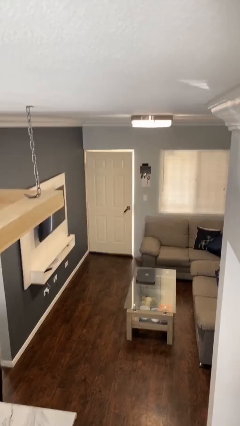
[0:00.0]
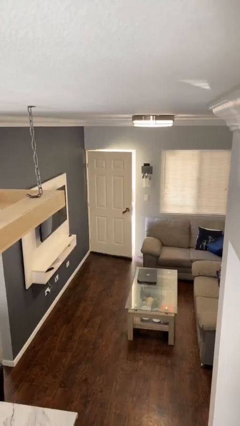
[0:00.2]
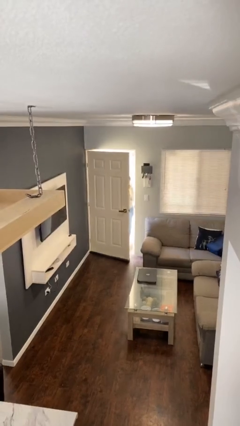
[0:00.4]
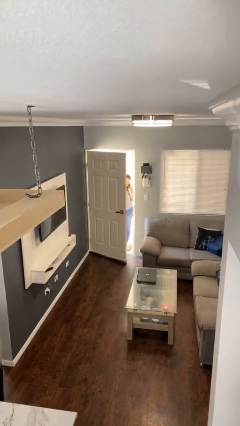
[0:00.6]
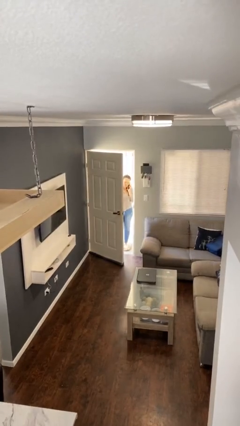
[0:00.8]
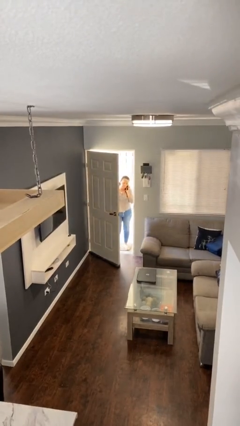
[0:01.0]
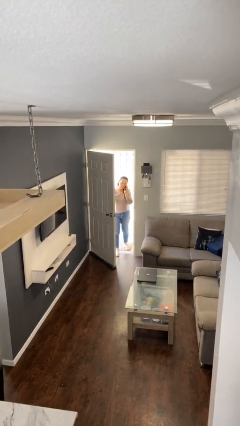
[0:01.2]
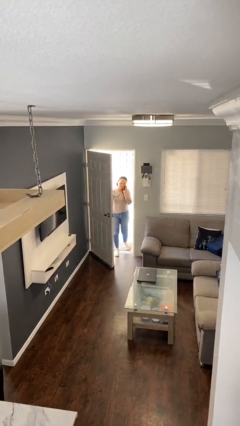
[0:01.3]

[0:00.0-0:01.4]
person opens facility door

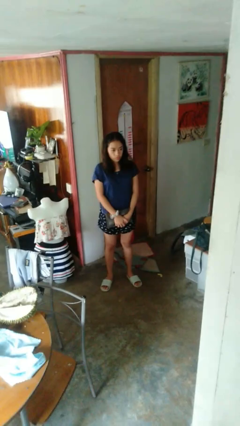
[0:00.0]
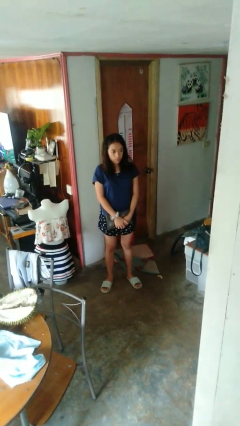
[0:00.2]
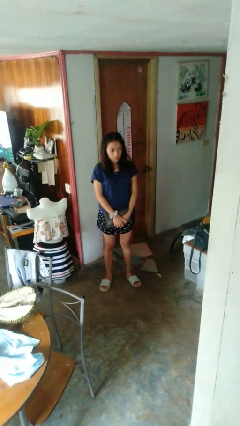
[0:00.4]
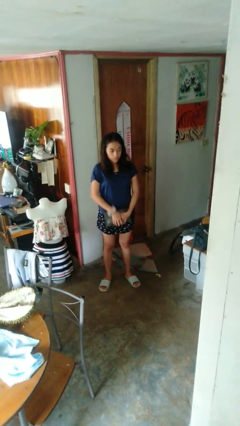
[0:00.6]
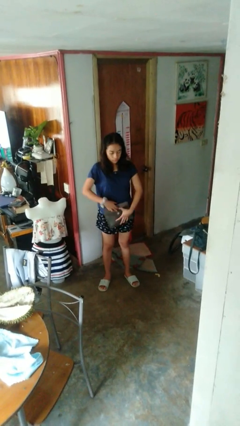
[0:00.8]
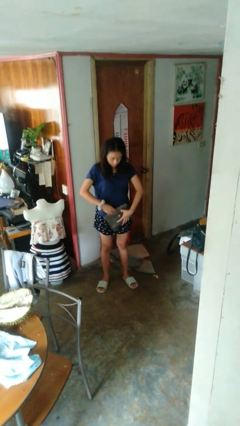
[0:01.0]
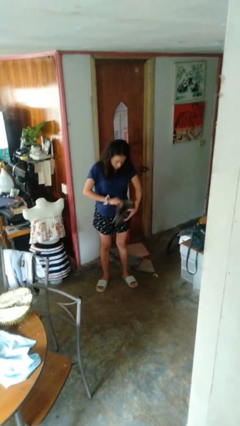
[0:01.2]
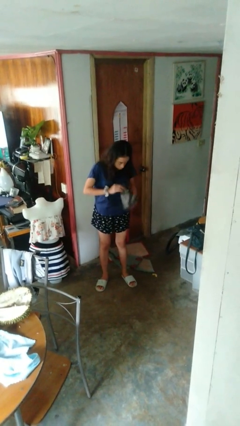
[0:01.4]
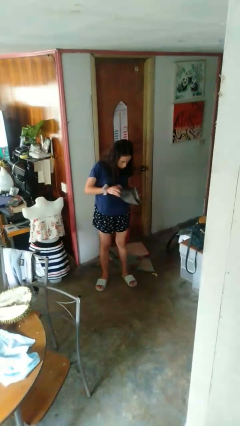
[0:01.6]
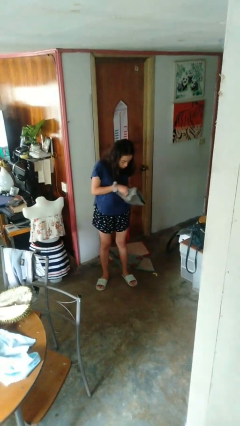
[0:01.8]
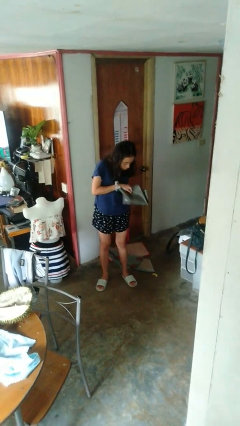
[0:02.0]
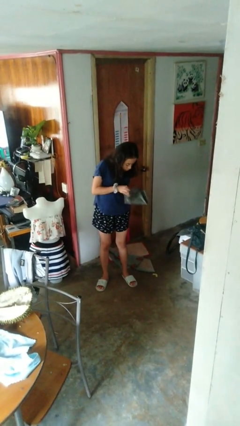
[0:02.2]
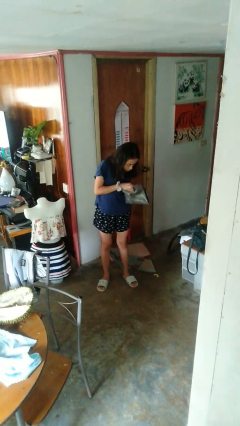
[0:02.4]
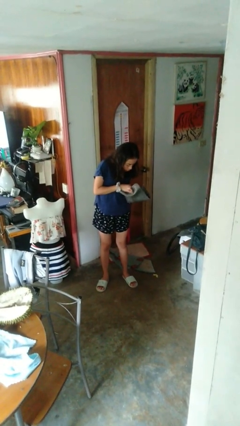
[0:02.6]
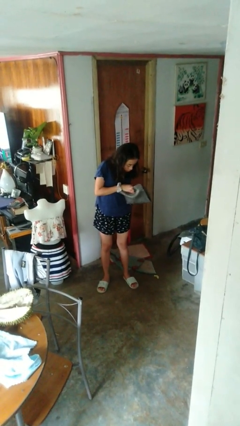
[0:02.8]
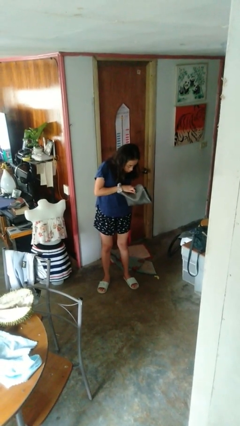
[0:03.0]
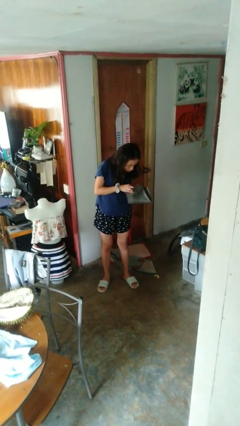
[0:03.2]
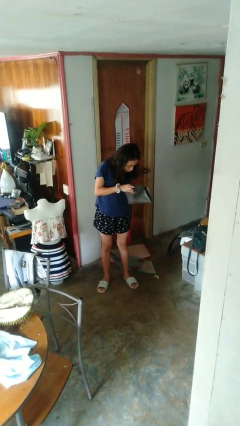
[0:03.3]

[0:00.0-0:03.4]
person searches in purse

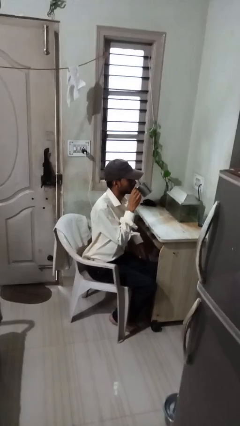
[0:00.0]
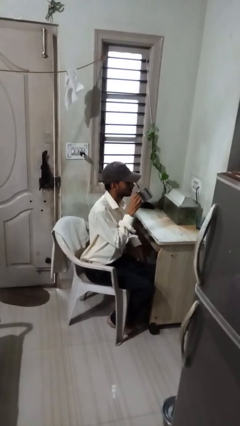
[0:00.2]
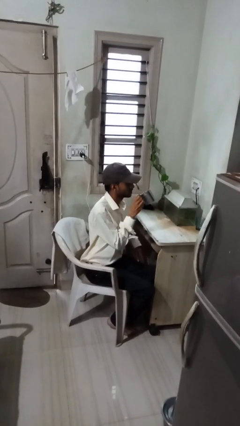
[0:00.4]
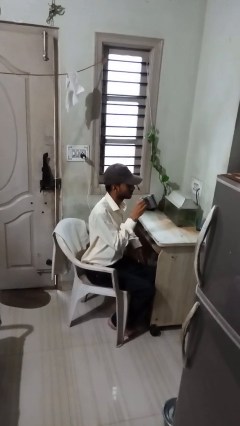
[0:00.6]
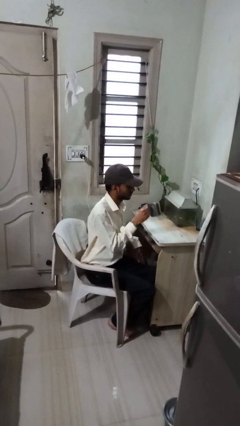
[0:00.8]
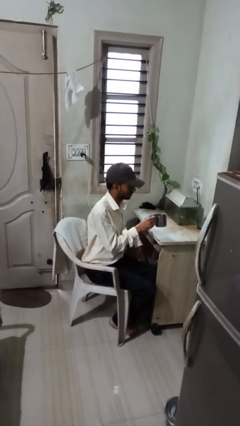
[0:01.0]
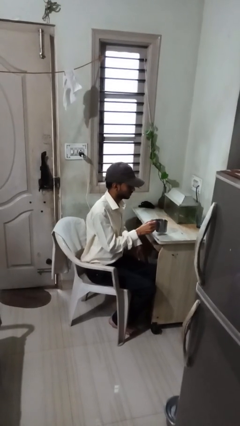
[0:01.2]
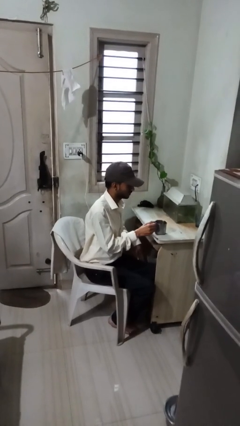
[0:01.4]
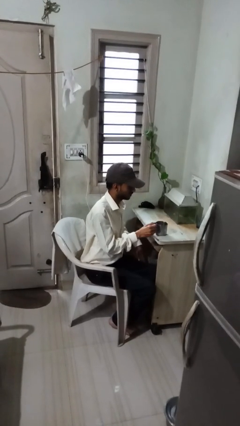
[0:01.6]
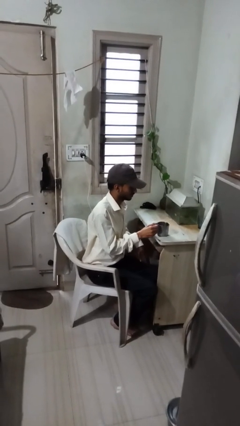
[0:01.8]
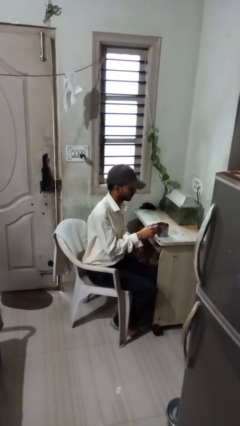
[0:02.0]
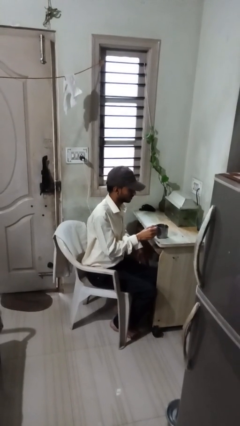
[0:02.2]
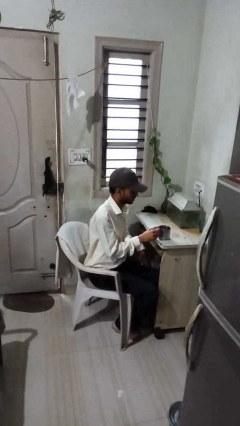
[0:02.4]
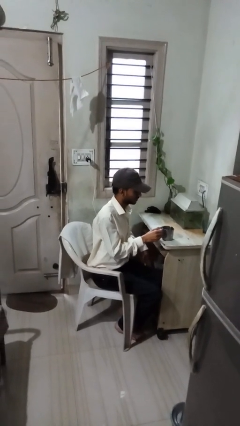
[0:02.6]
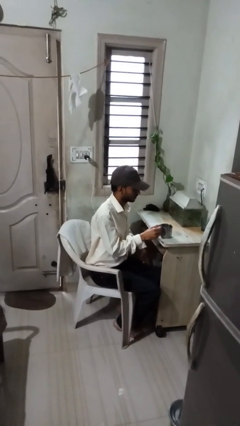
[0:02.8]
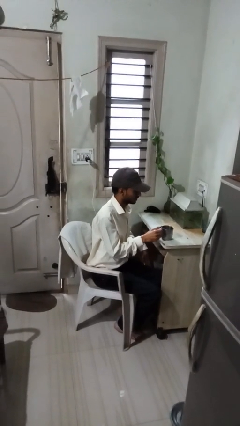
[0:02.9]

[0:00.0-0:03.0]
person puts down object on table

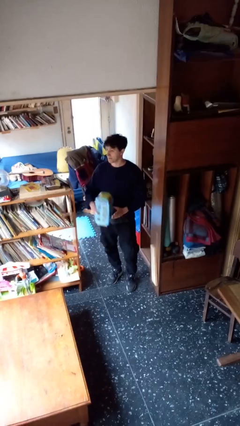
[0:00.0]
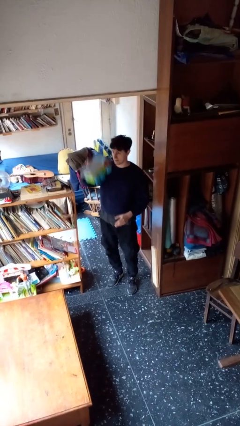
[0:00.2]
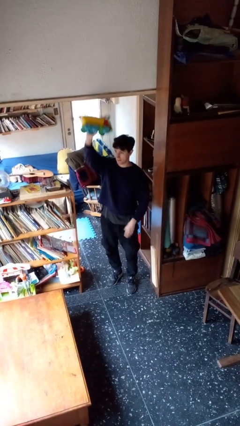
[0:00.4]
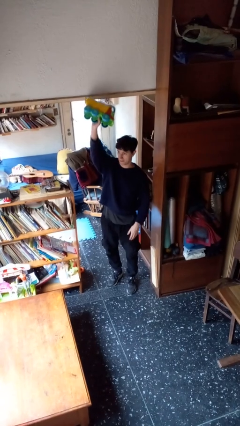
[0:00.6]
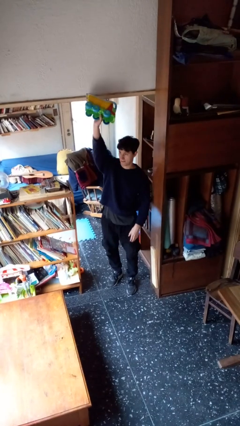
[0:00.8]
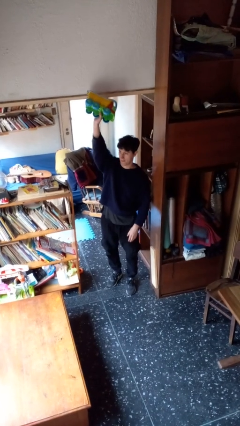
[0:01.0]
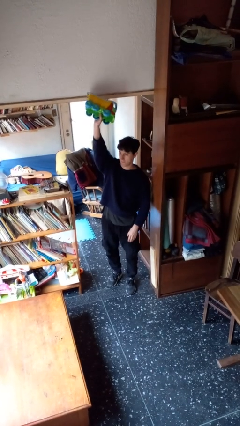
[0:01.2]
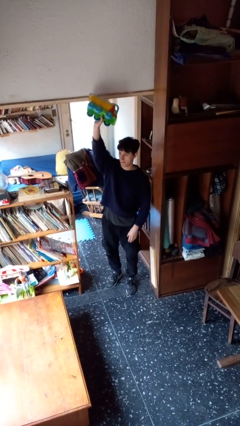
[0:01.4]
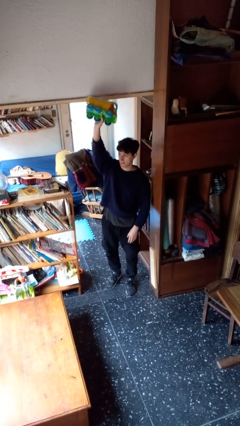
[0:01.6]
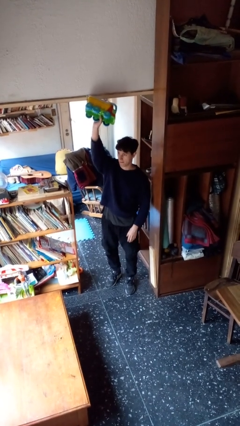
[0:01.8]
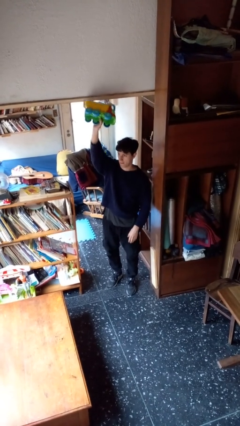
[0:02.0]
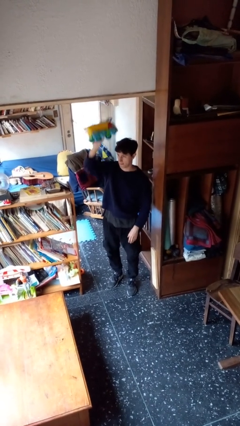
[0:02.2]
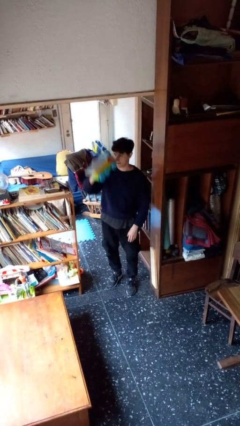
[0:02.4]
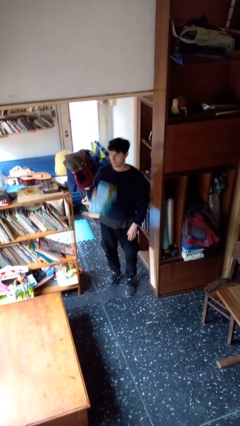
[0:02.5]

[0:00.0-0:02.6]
person holds object above head

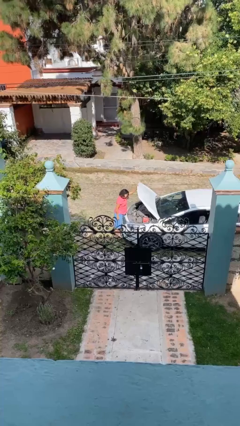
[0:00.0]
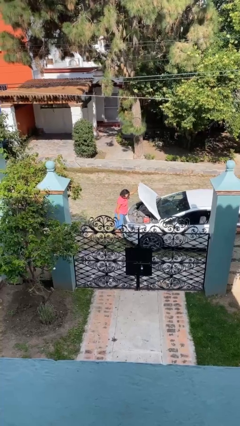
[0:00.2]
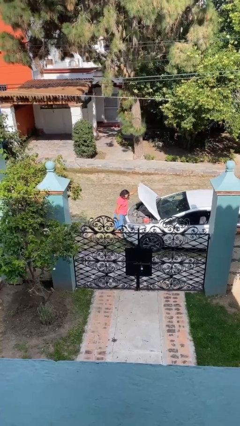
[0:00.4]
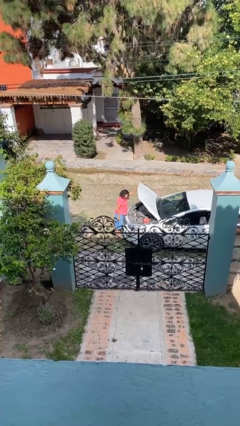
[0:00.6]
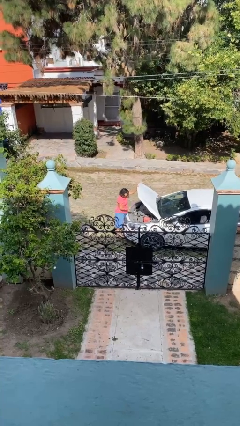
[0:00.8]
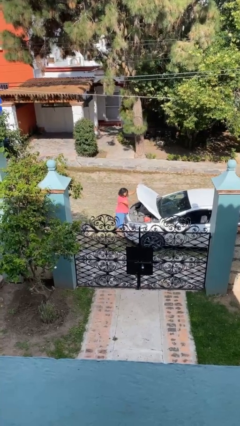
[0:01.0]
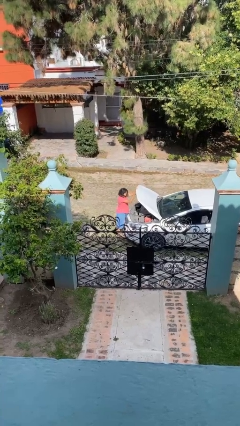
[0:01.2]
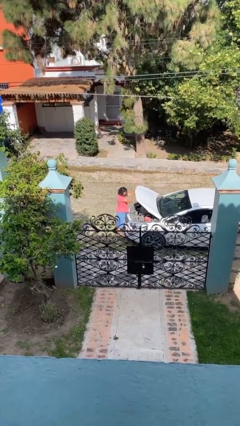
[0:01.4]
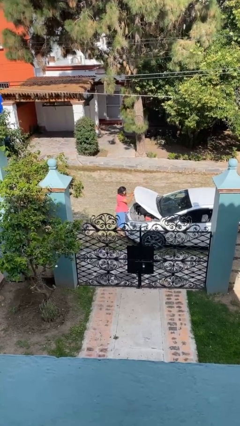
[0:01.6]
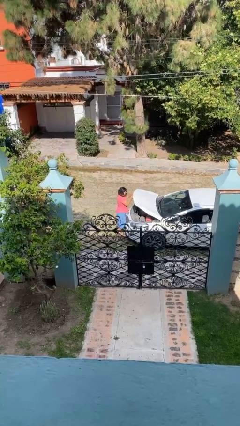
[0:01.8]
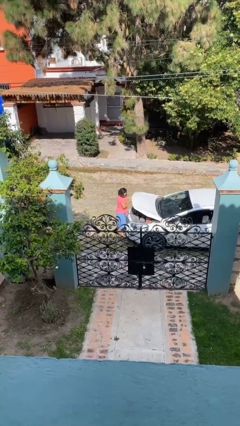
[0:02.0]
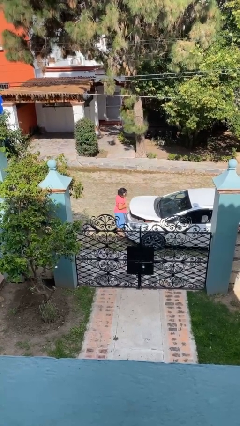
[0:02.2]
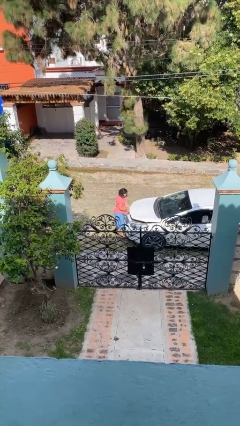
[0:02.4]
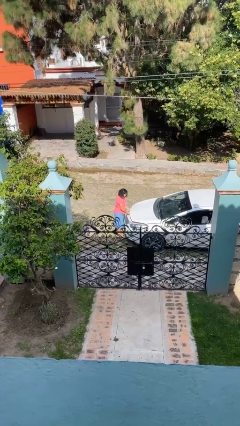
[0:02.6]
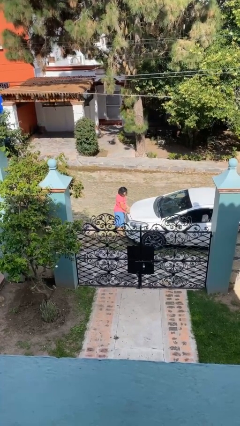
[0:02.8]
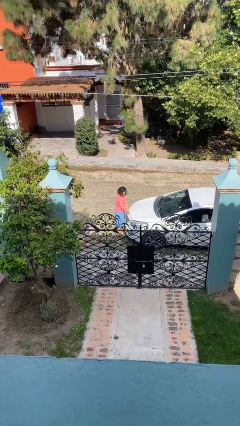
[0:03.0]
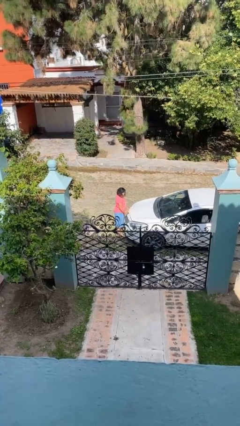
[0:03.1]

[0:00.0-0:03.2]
person closes car hood

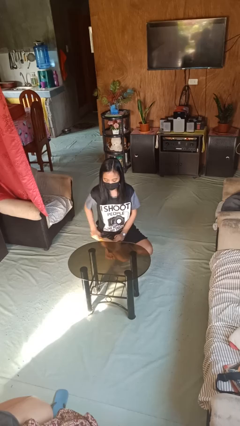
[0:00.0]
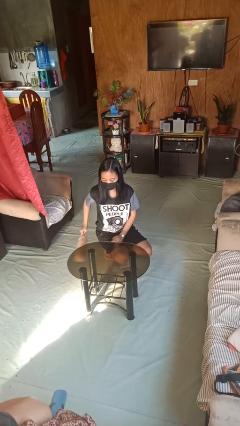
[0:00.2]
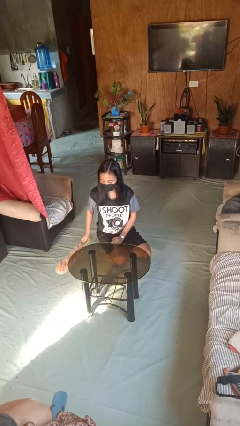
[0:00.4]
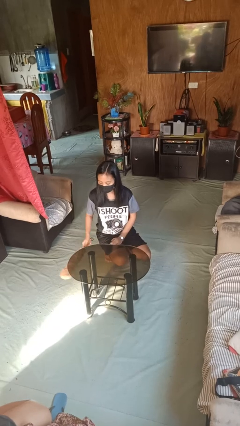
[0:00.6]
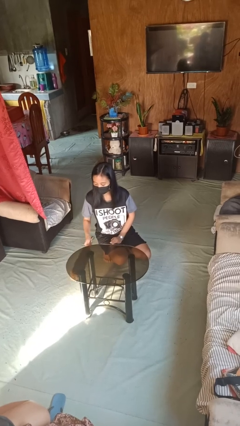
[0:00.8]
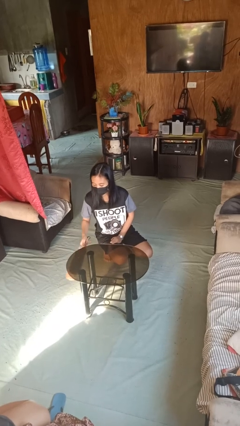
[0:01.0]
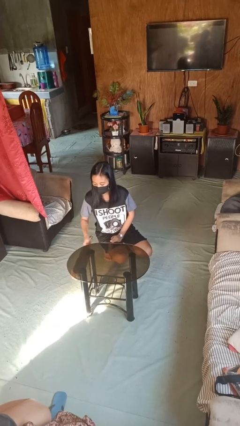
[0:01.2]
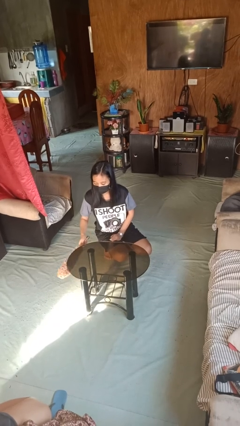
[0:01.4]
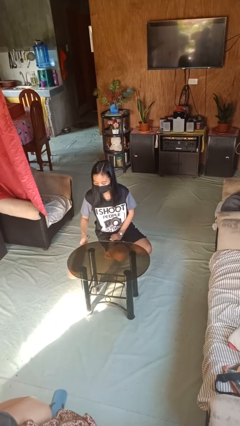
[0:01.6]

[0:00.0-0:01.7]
person dusts furniture

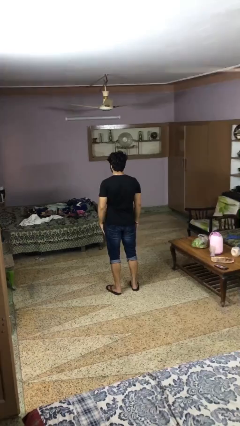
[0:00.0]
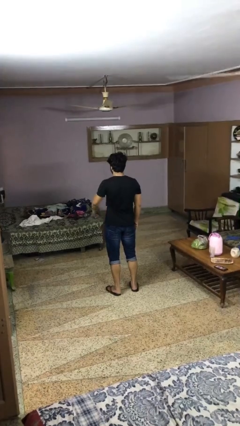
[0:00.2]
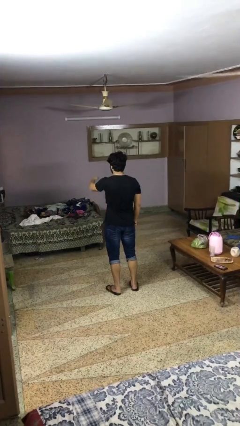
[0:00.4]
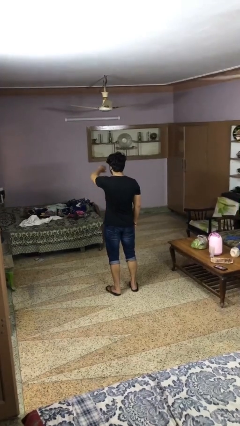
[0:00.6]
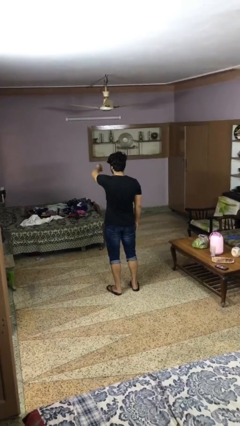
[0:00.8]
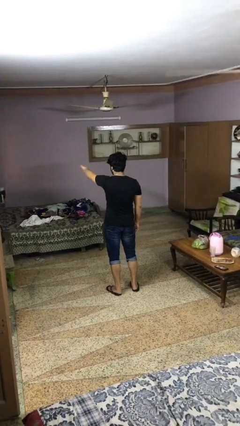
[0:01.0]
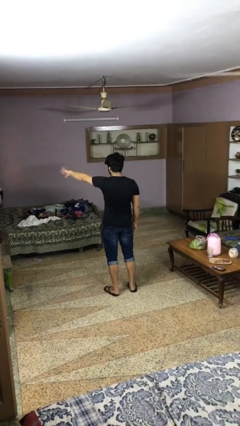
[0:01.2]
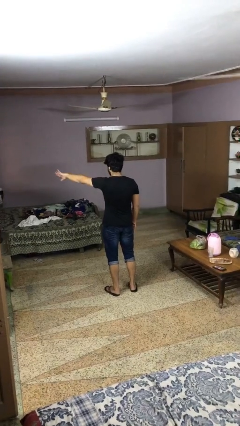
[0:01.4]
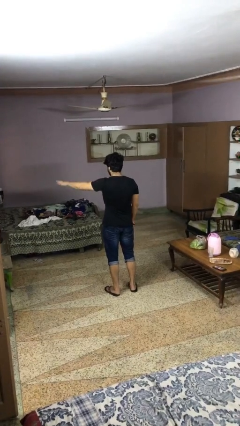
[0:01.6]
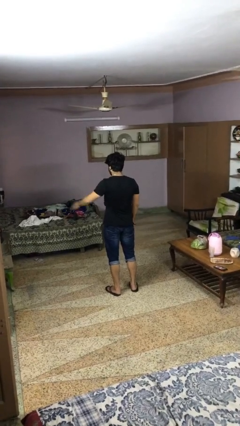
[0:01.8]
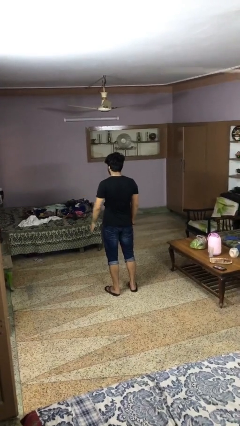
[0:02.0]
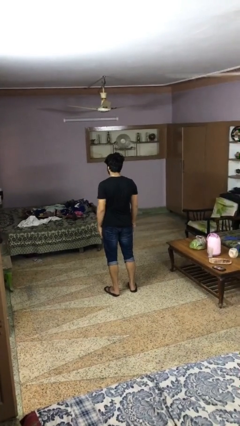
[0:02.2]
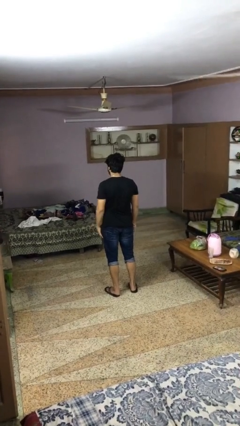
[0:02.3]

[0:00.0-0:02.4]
person gestures swipe left
